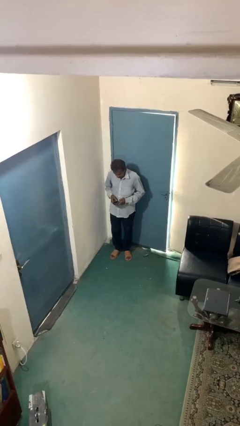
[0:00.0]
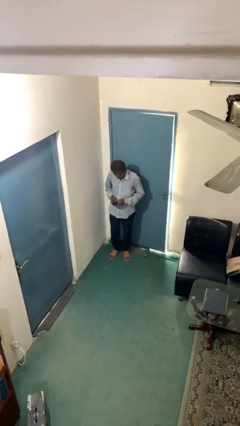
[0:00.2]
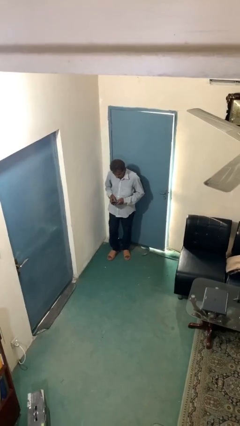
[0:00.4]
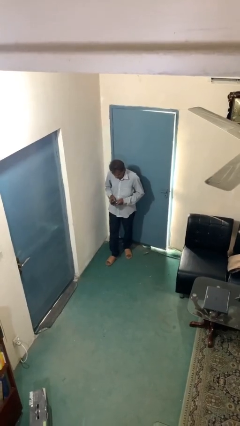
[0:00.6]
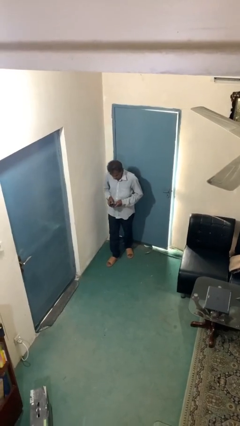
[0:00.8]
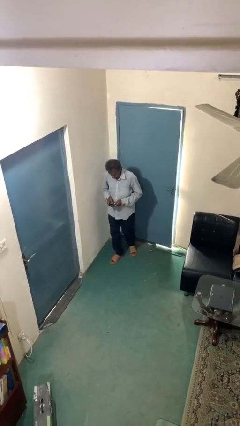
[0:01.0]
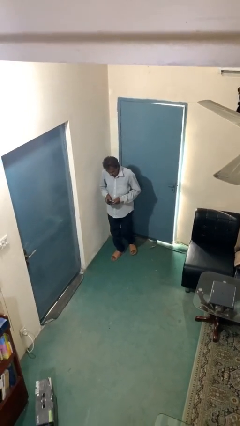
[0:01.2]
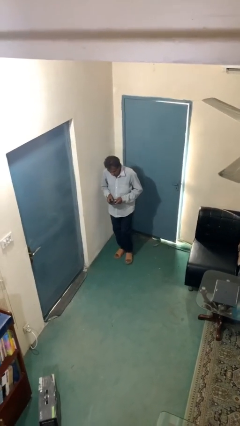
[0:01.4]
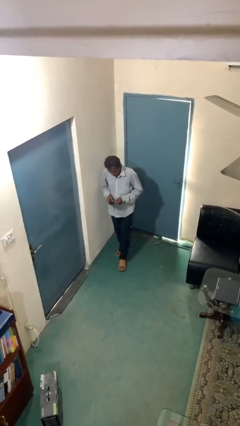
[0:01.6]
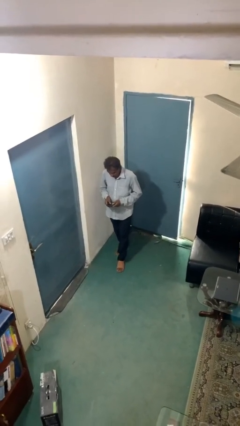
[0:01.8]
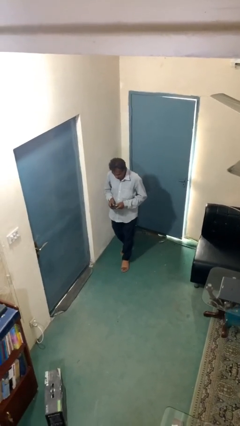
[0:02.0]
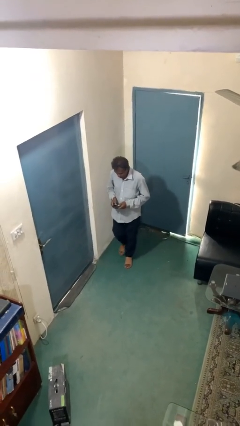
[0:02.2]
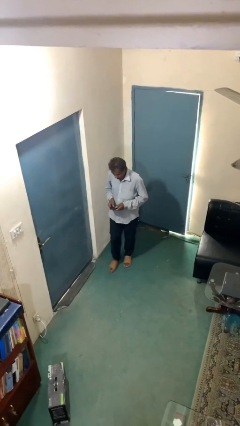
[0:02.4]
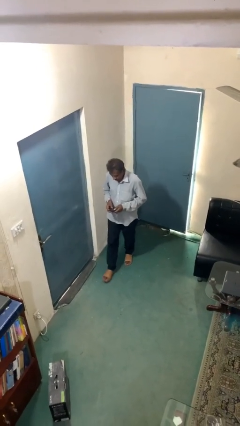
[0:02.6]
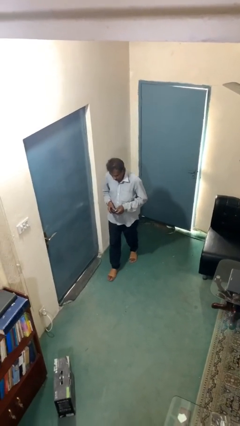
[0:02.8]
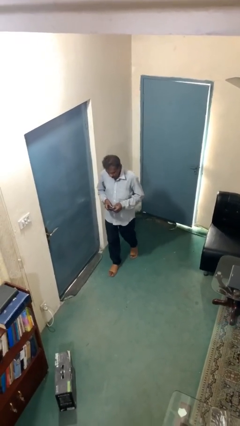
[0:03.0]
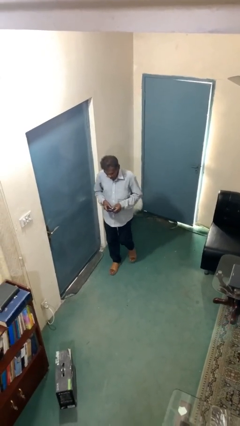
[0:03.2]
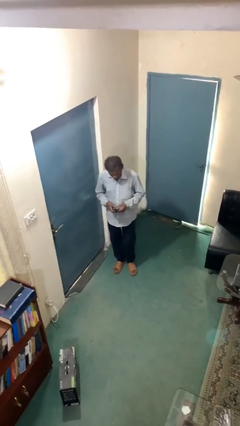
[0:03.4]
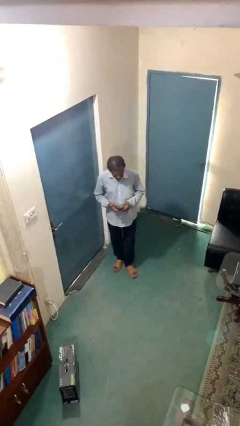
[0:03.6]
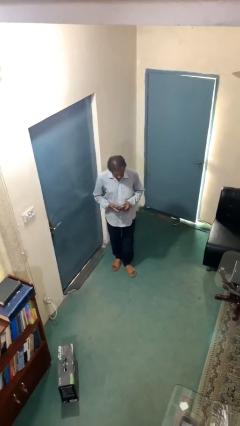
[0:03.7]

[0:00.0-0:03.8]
person texts on phone

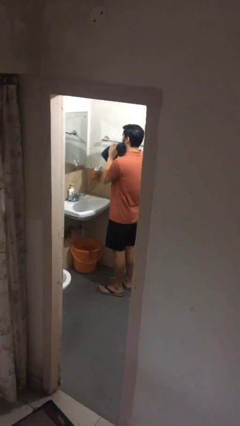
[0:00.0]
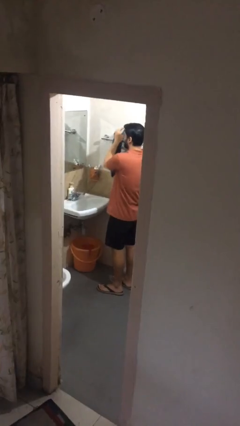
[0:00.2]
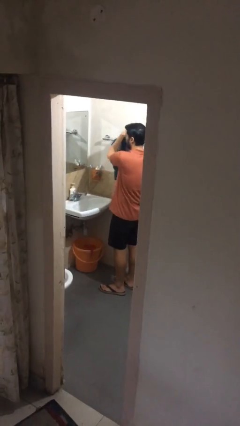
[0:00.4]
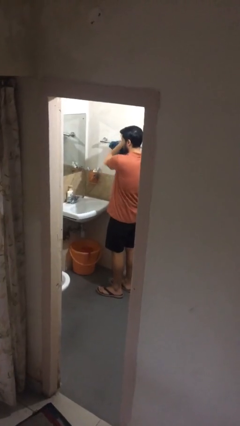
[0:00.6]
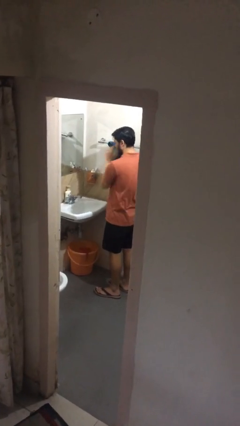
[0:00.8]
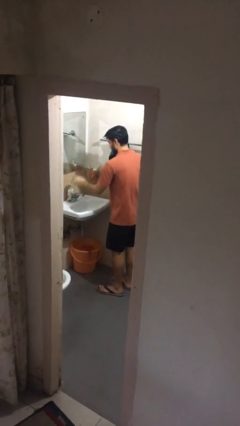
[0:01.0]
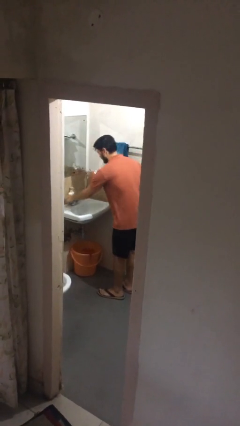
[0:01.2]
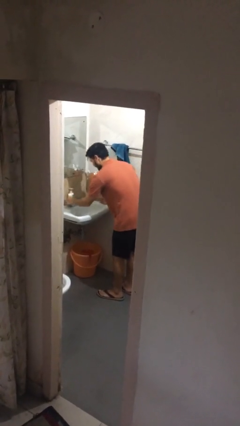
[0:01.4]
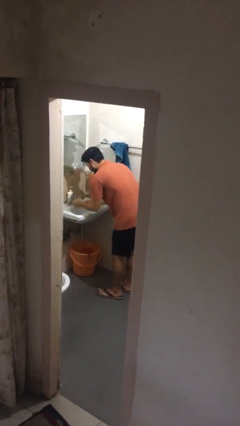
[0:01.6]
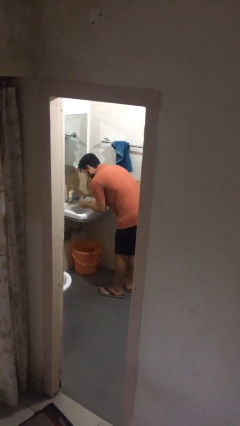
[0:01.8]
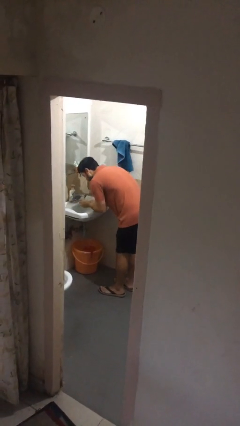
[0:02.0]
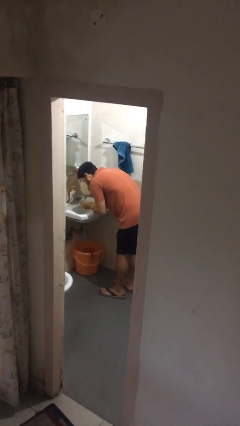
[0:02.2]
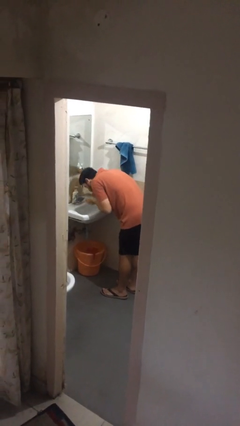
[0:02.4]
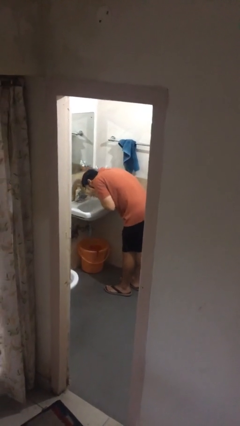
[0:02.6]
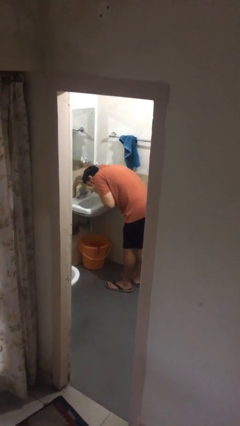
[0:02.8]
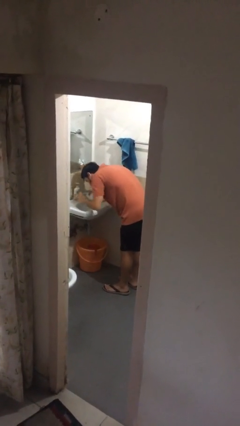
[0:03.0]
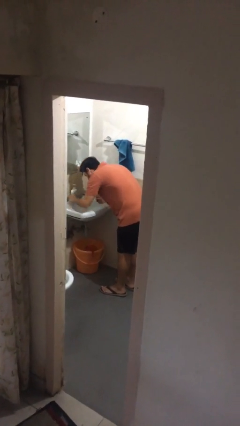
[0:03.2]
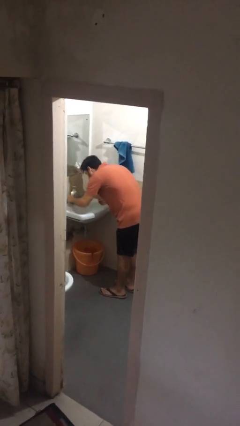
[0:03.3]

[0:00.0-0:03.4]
person washes face

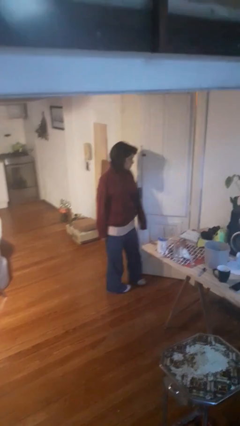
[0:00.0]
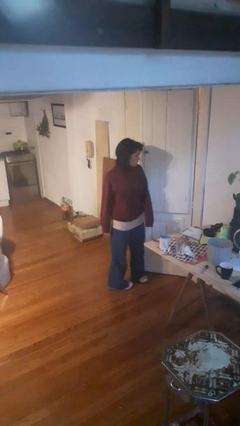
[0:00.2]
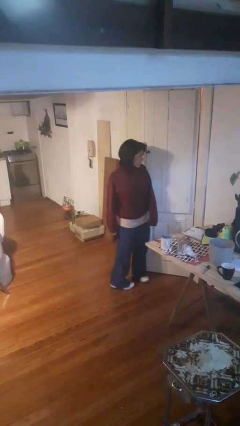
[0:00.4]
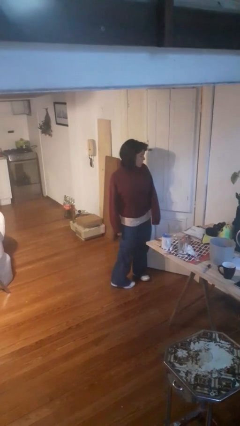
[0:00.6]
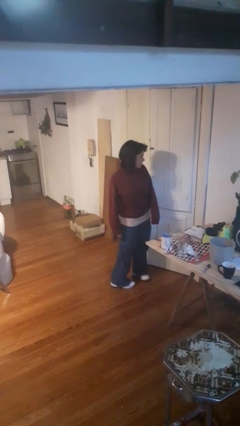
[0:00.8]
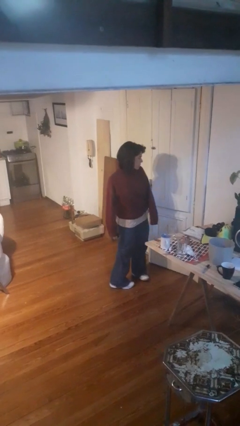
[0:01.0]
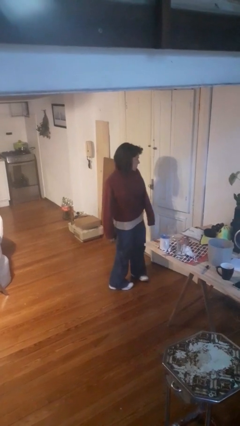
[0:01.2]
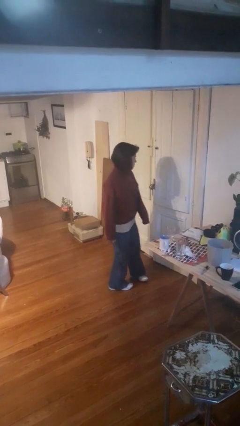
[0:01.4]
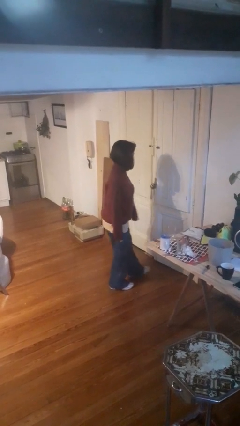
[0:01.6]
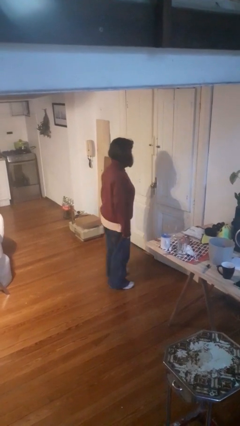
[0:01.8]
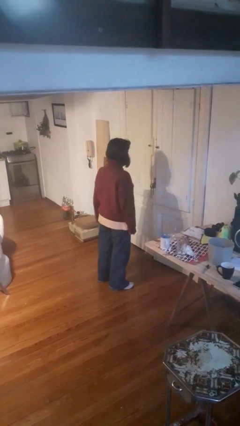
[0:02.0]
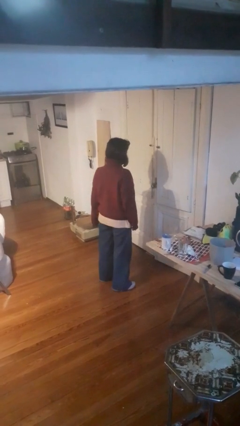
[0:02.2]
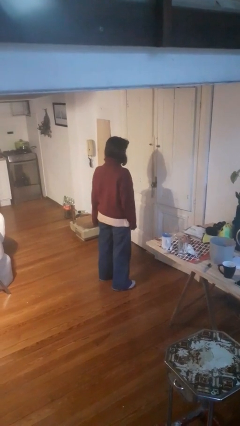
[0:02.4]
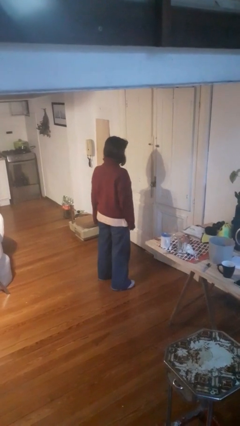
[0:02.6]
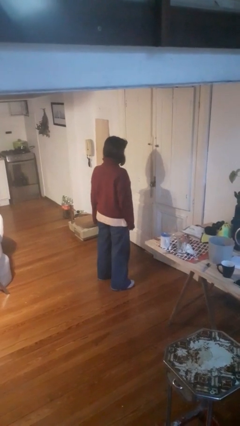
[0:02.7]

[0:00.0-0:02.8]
person closes door with hip

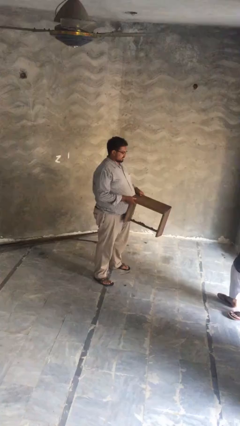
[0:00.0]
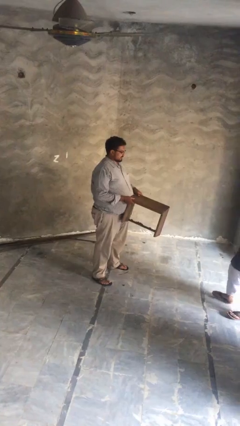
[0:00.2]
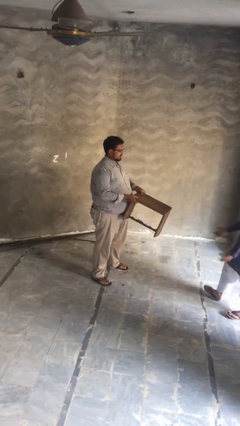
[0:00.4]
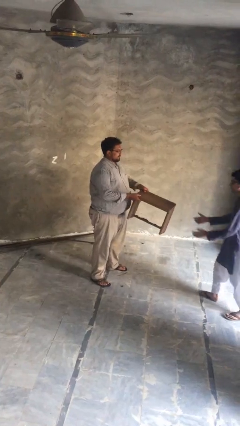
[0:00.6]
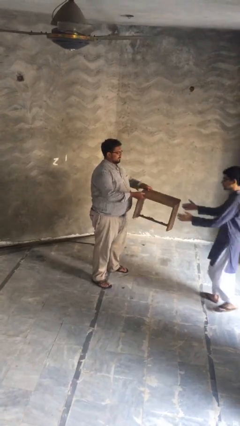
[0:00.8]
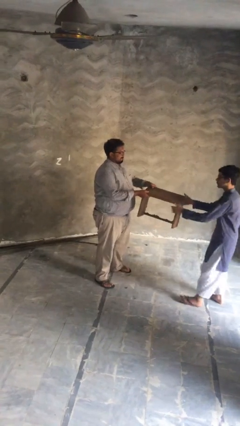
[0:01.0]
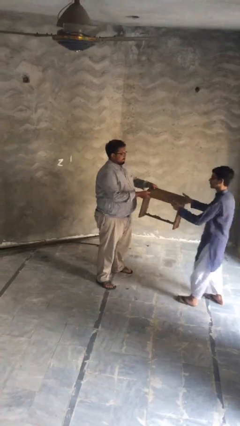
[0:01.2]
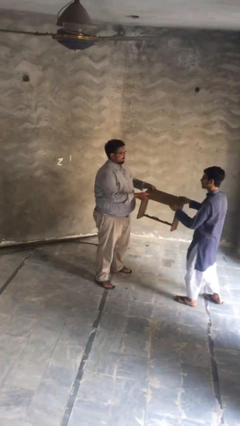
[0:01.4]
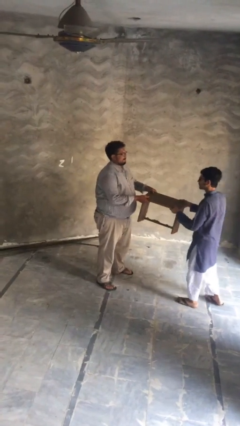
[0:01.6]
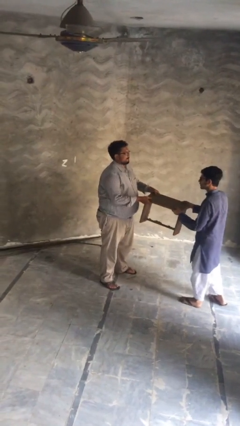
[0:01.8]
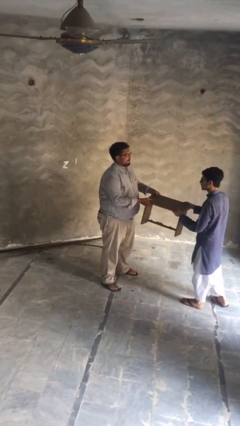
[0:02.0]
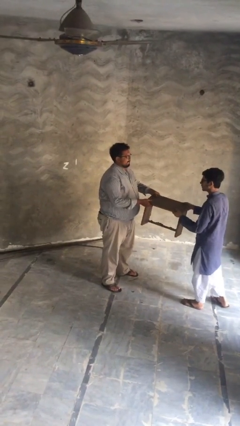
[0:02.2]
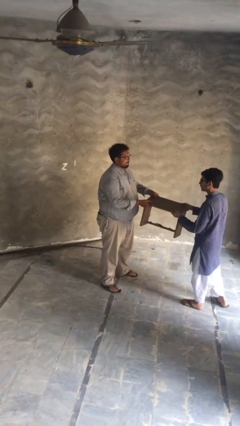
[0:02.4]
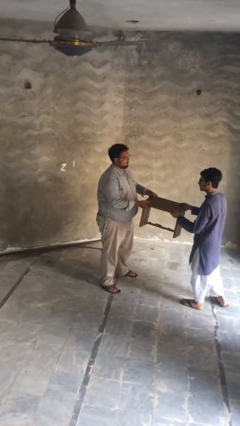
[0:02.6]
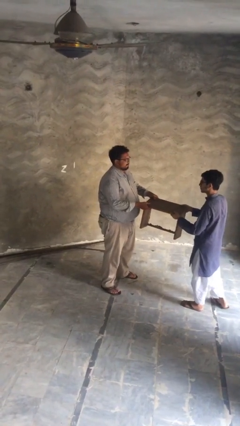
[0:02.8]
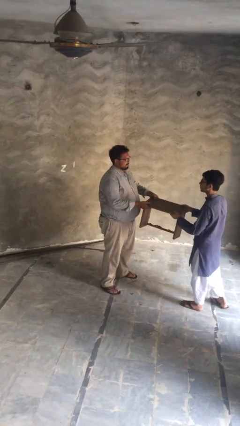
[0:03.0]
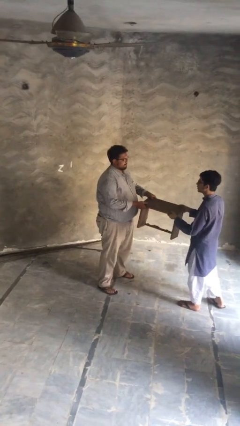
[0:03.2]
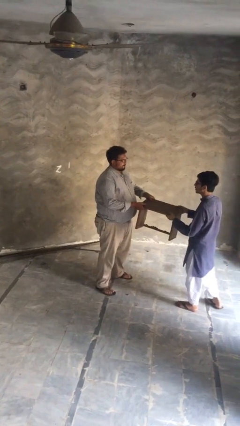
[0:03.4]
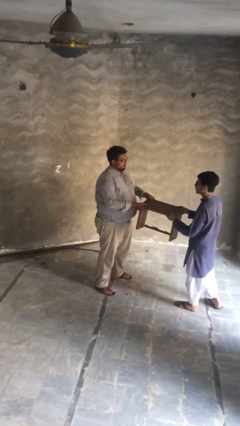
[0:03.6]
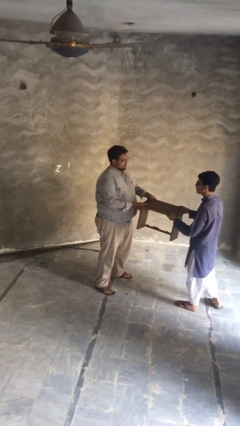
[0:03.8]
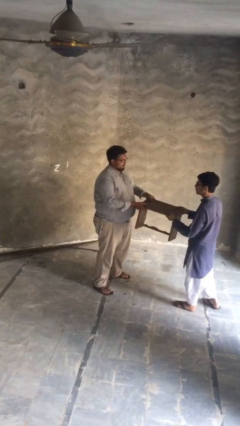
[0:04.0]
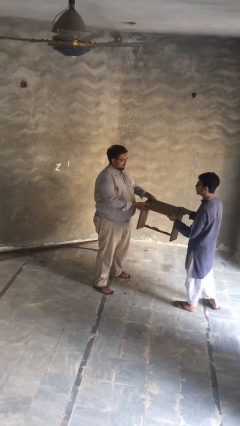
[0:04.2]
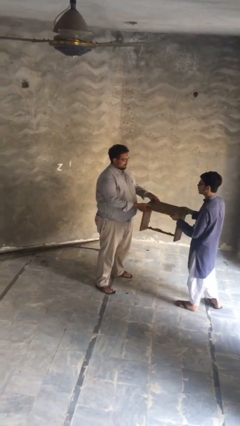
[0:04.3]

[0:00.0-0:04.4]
person transfers object to person

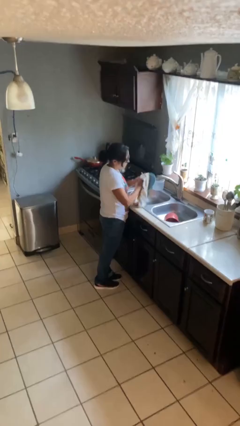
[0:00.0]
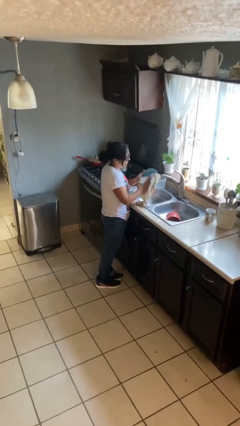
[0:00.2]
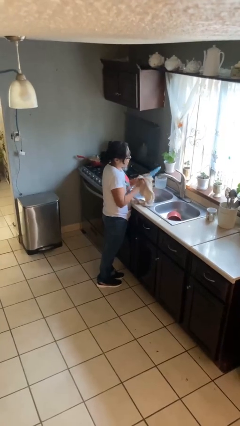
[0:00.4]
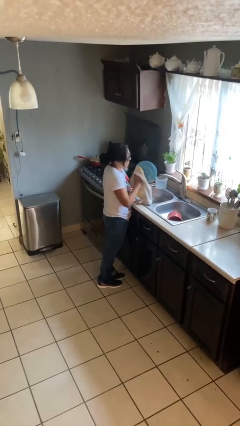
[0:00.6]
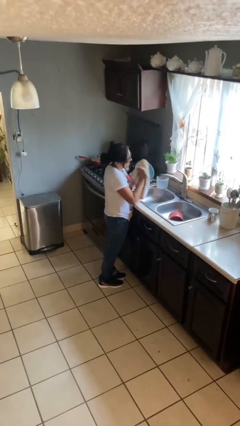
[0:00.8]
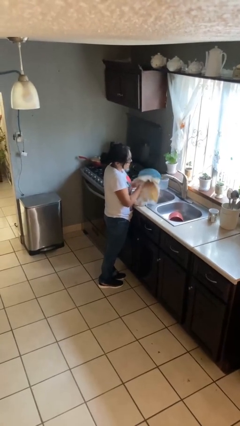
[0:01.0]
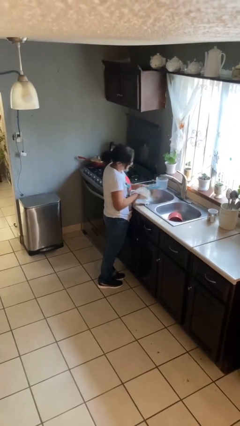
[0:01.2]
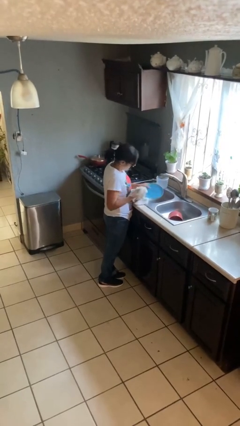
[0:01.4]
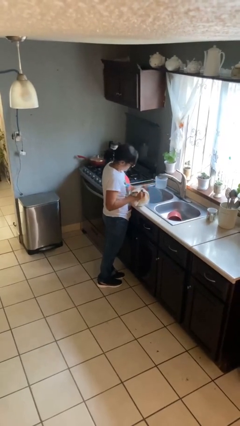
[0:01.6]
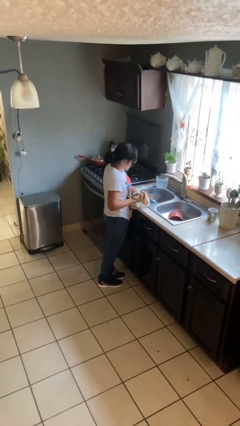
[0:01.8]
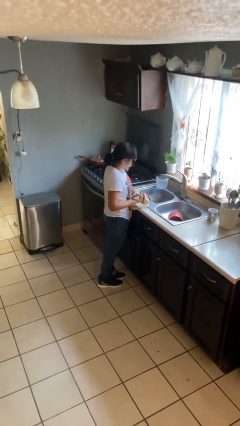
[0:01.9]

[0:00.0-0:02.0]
person dries dish

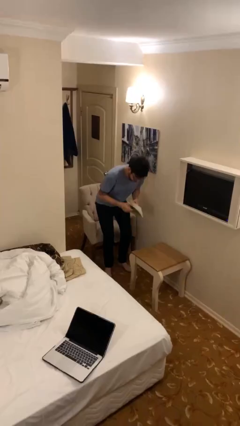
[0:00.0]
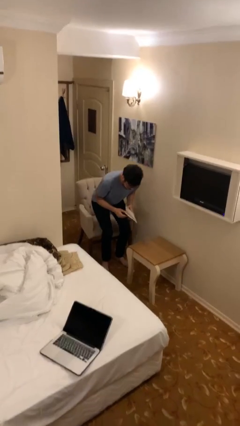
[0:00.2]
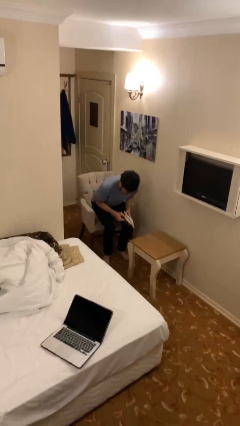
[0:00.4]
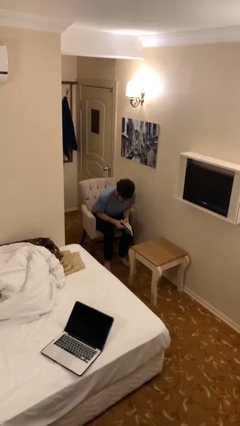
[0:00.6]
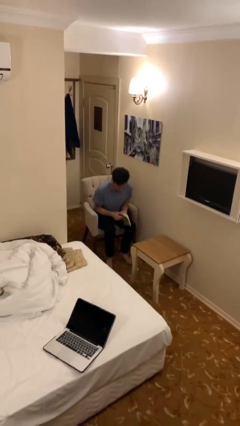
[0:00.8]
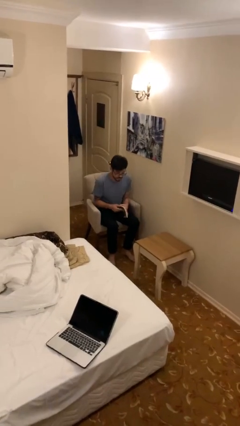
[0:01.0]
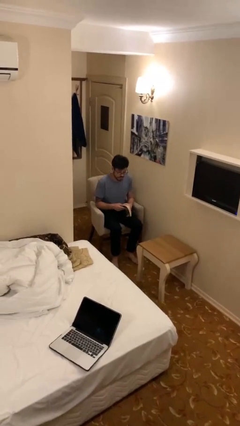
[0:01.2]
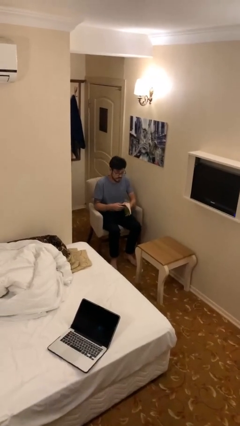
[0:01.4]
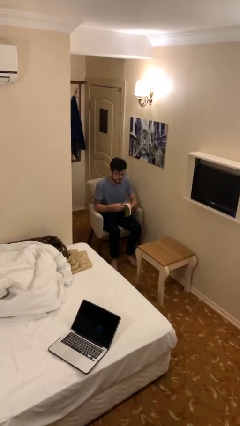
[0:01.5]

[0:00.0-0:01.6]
person sits down
